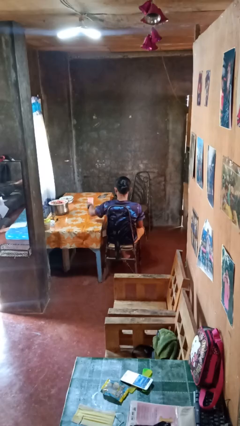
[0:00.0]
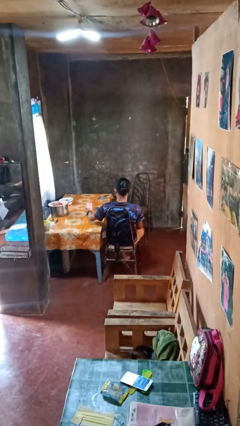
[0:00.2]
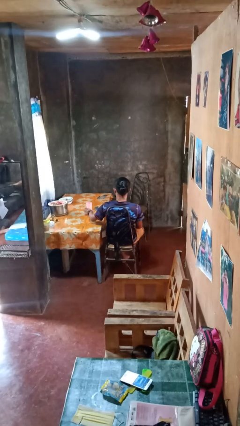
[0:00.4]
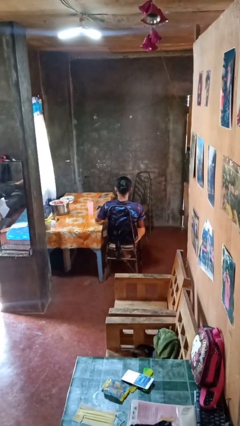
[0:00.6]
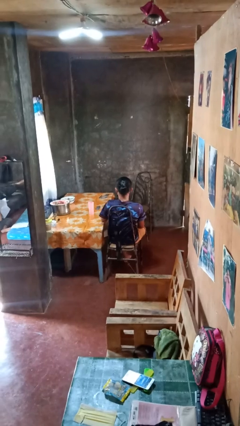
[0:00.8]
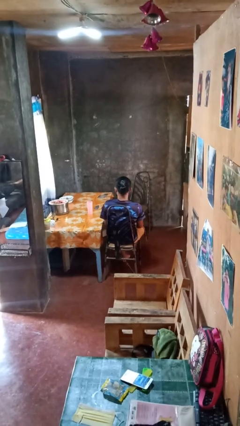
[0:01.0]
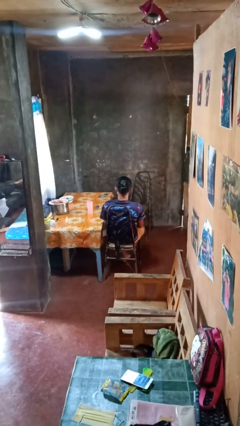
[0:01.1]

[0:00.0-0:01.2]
person sets upright glass

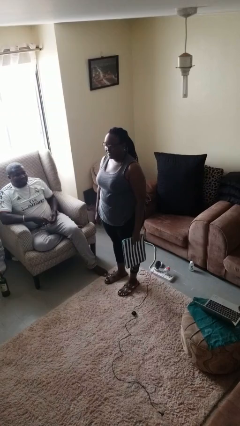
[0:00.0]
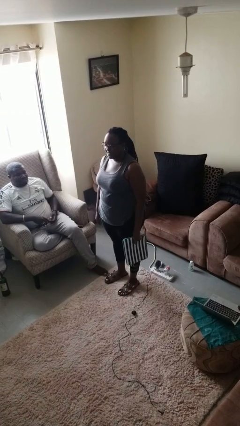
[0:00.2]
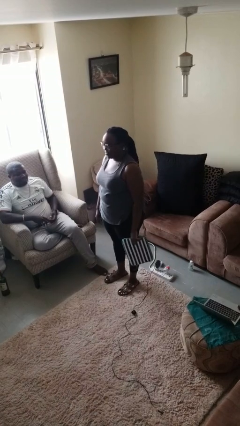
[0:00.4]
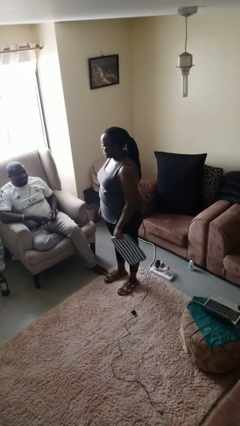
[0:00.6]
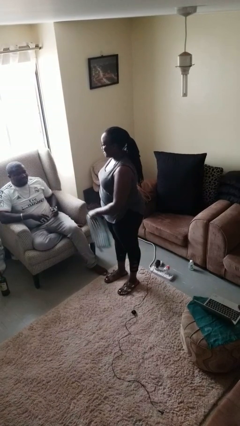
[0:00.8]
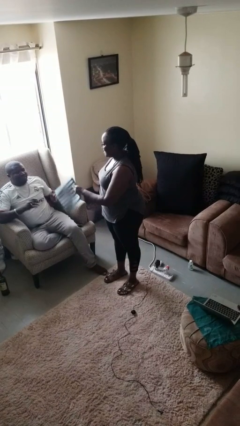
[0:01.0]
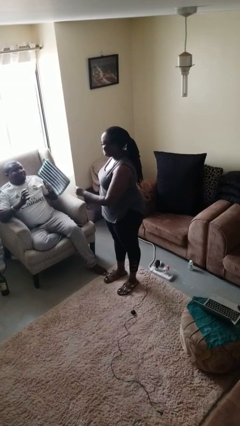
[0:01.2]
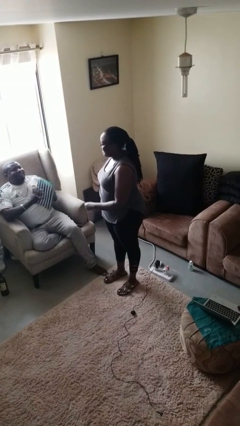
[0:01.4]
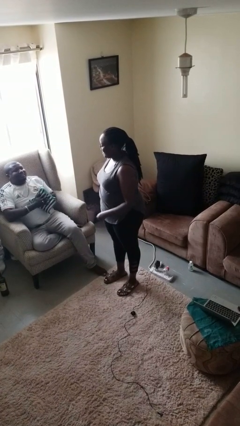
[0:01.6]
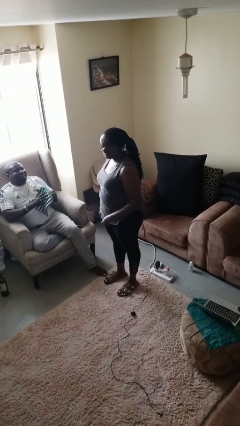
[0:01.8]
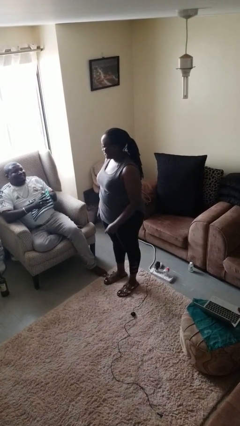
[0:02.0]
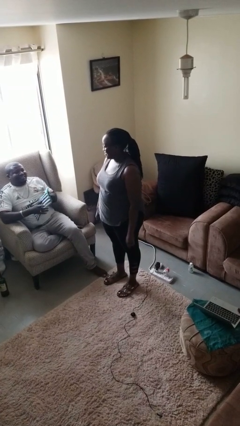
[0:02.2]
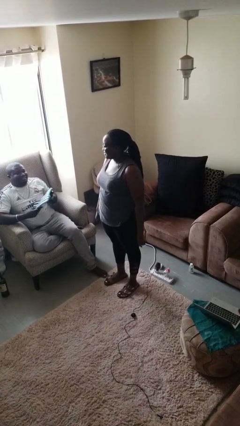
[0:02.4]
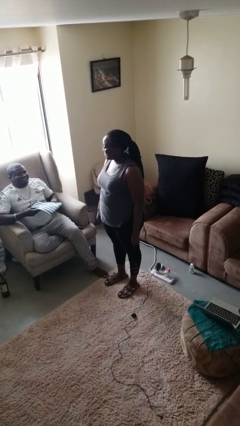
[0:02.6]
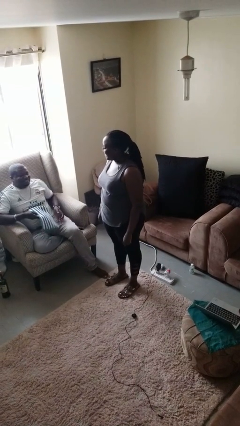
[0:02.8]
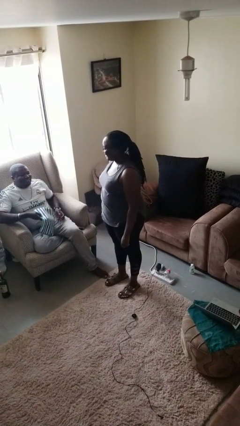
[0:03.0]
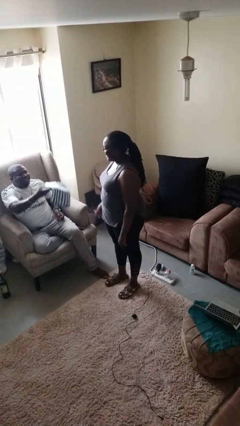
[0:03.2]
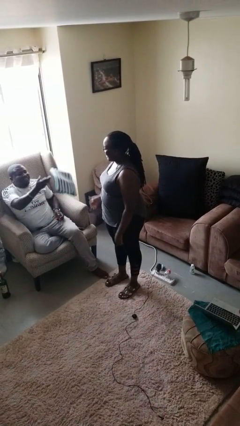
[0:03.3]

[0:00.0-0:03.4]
person throws object to person

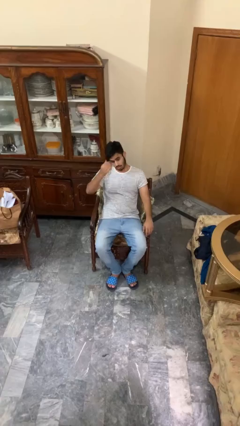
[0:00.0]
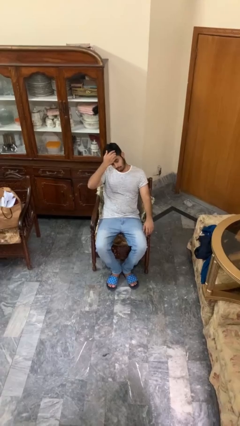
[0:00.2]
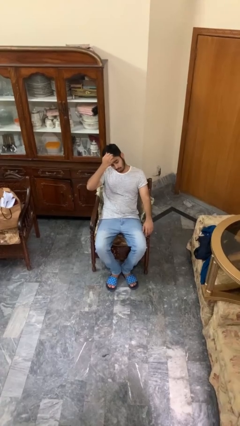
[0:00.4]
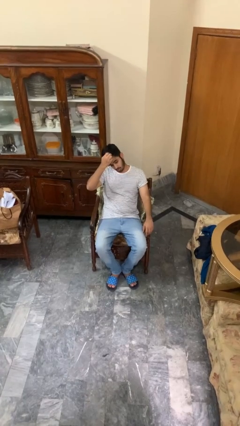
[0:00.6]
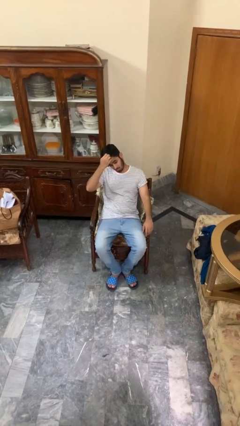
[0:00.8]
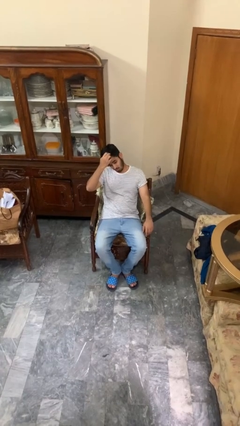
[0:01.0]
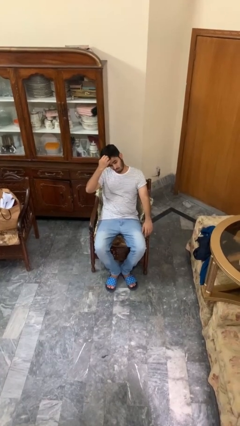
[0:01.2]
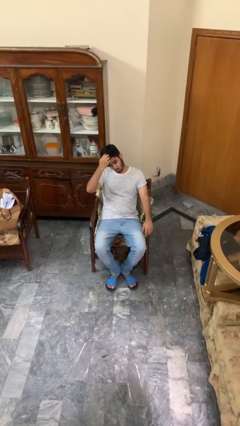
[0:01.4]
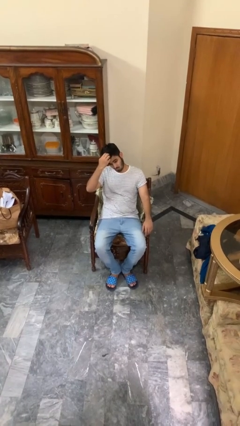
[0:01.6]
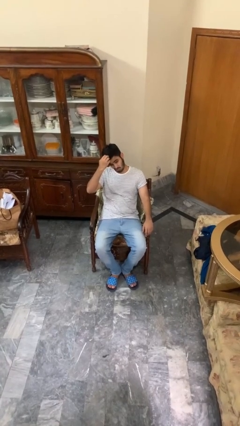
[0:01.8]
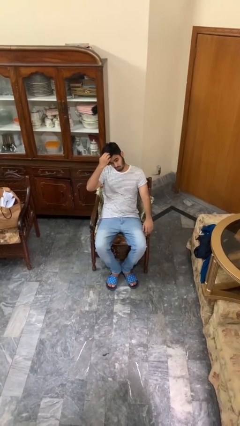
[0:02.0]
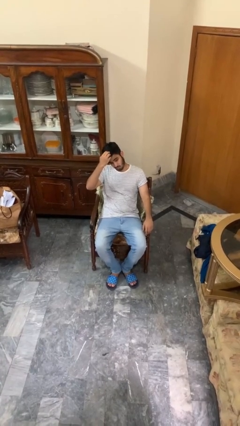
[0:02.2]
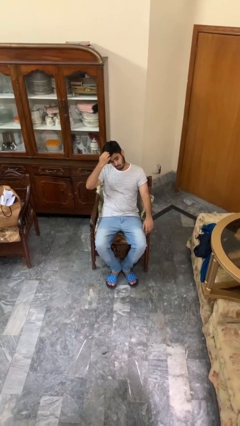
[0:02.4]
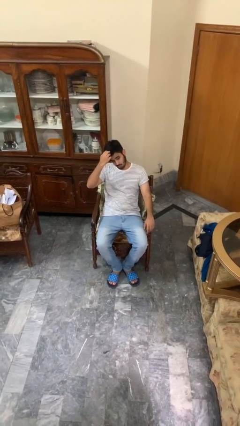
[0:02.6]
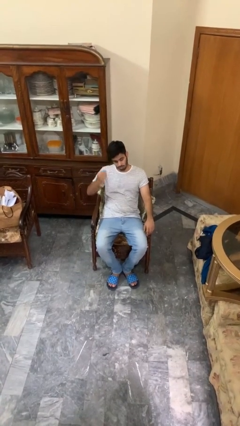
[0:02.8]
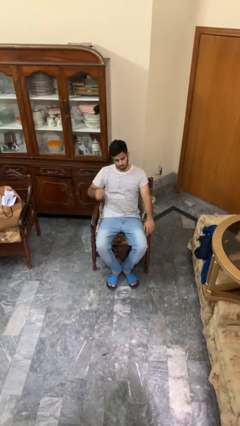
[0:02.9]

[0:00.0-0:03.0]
person strokes hair

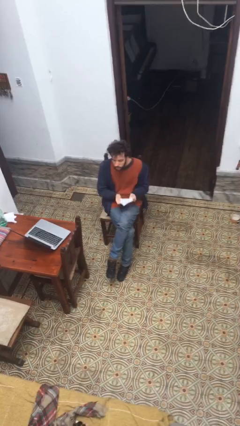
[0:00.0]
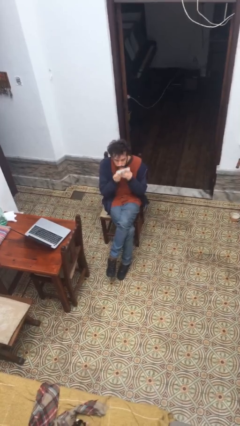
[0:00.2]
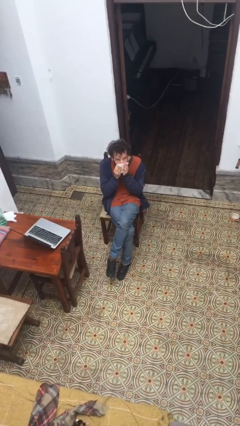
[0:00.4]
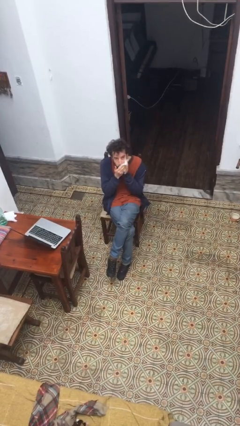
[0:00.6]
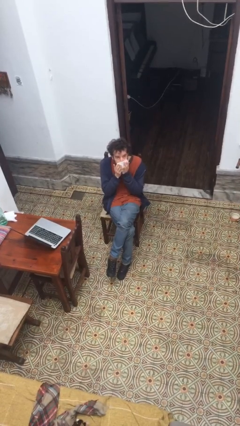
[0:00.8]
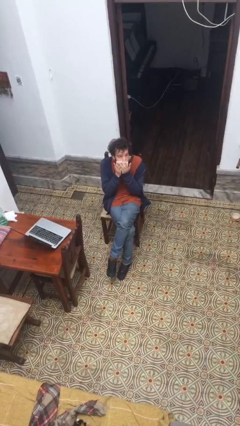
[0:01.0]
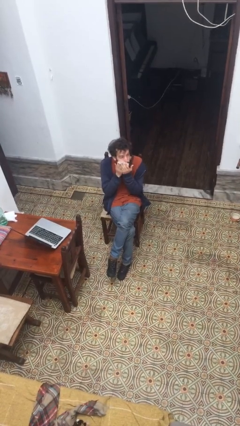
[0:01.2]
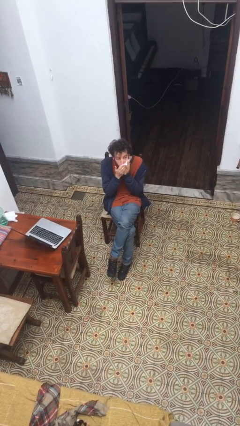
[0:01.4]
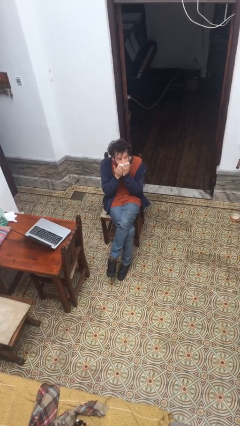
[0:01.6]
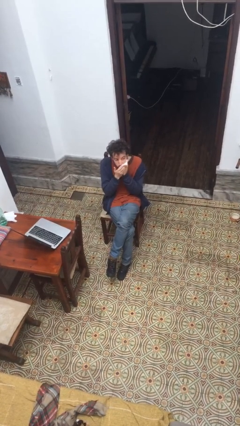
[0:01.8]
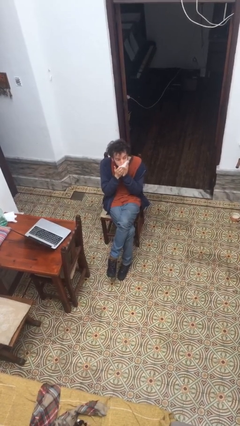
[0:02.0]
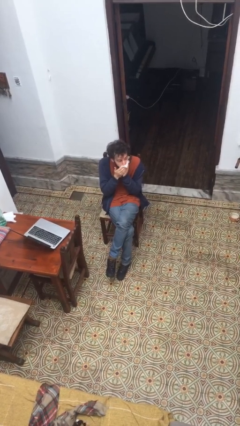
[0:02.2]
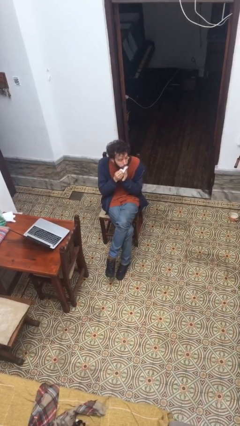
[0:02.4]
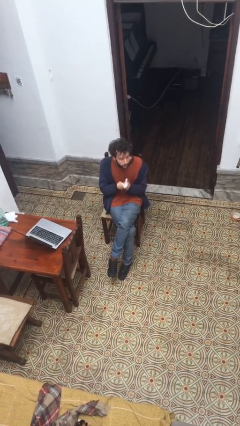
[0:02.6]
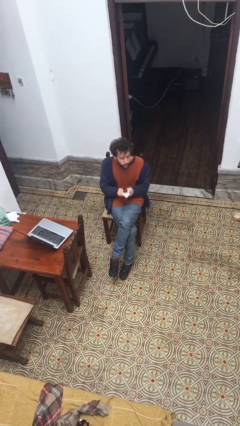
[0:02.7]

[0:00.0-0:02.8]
person wipes mouth with napkin

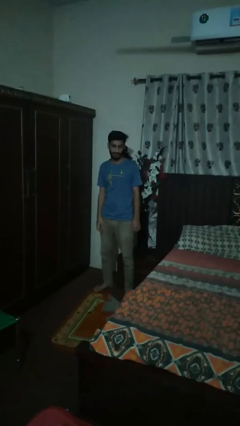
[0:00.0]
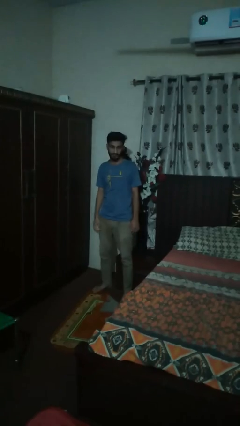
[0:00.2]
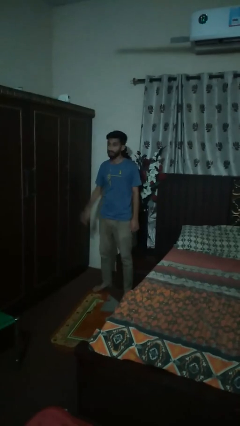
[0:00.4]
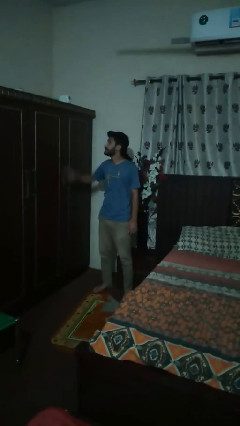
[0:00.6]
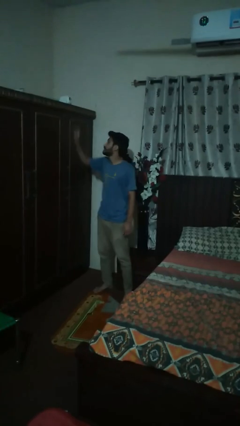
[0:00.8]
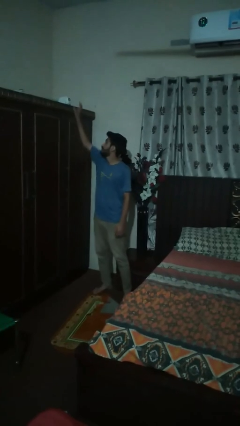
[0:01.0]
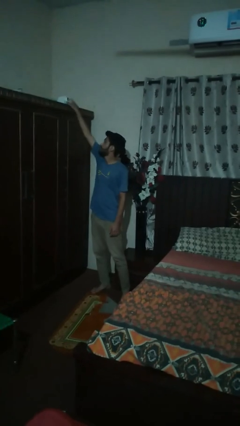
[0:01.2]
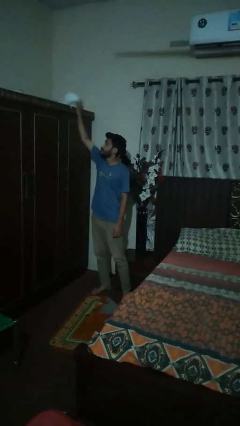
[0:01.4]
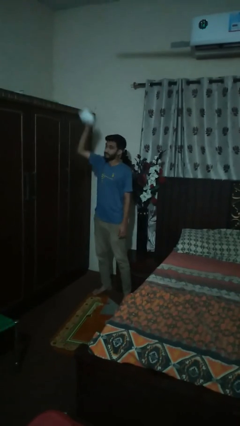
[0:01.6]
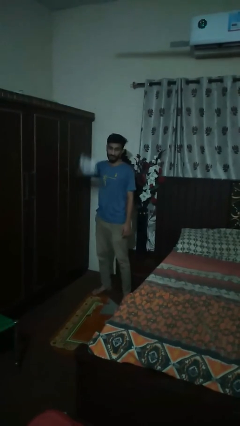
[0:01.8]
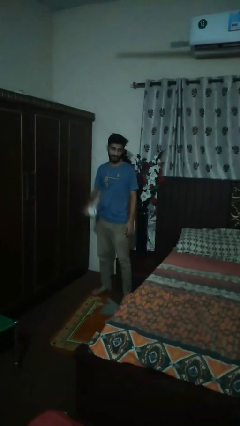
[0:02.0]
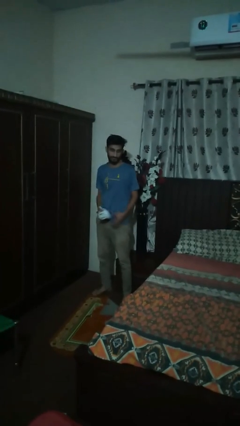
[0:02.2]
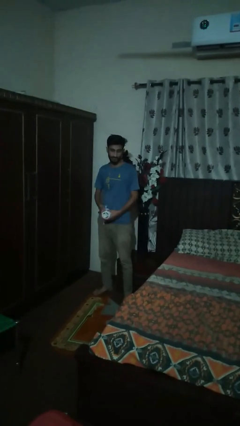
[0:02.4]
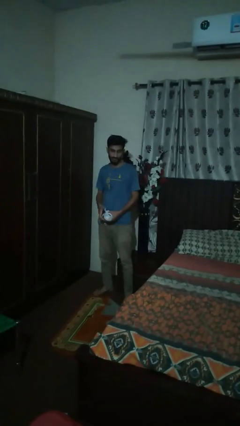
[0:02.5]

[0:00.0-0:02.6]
person puts down object on shelf

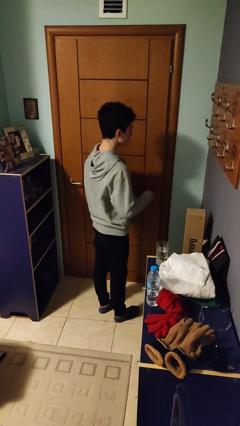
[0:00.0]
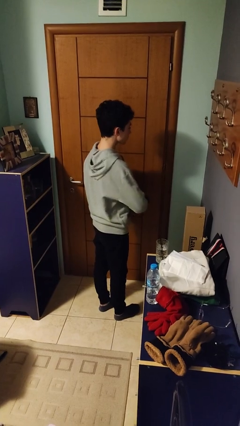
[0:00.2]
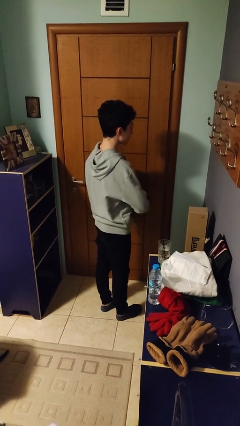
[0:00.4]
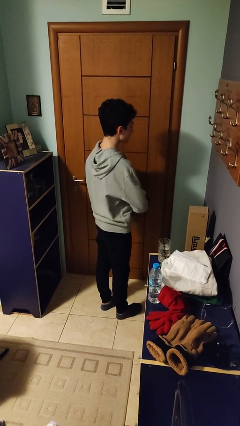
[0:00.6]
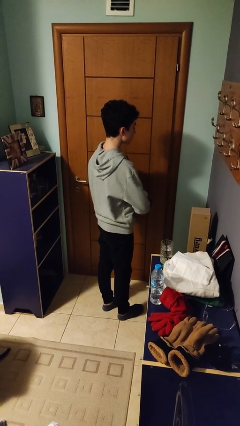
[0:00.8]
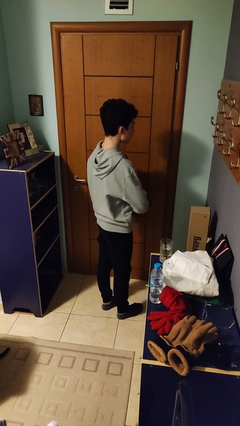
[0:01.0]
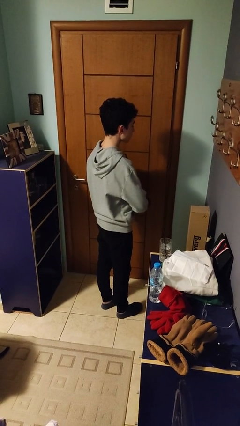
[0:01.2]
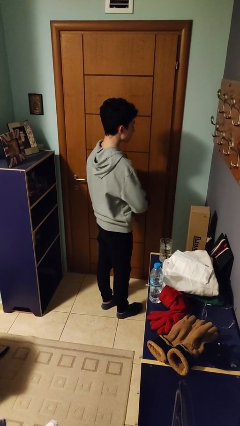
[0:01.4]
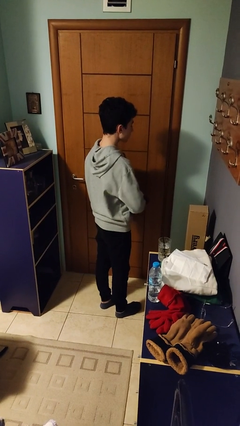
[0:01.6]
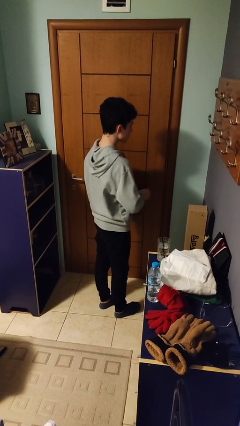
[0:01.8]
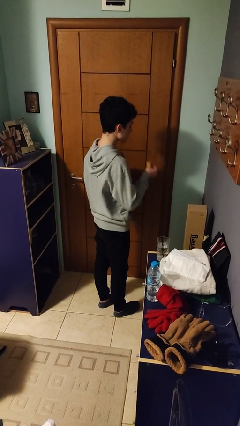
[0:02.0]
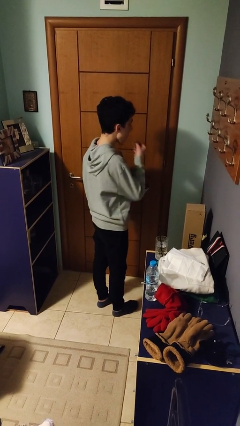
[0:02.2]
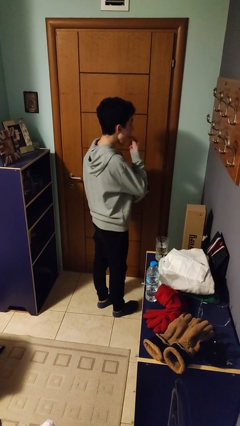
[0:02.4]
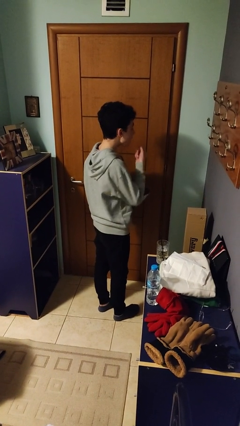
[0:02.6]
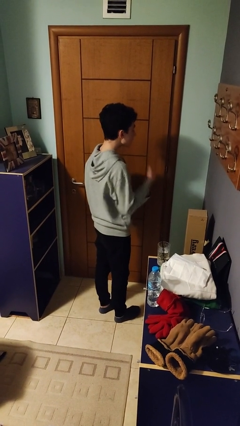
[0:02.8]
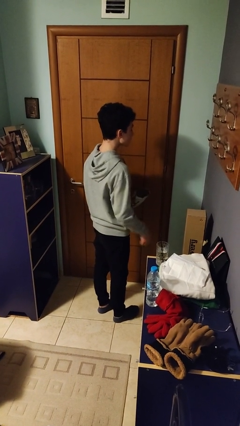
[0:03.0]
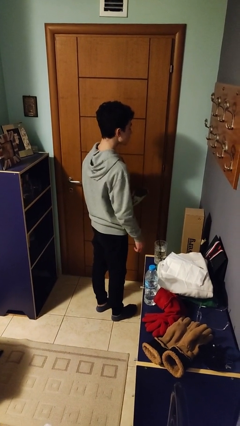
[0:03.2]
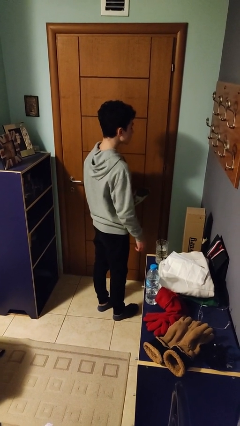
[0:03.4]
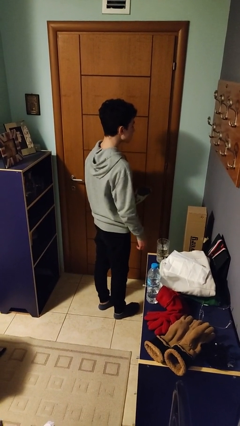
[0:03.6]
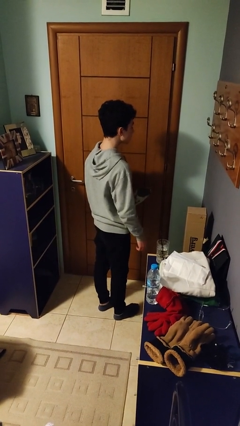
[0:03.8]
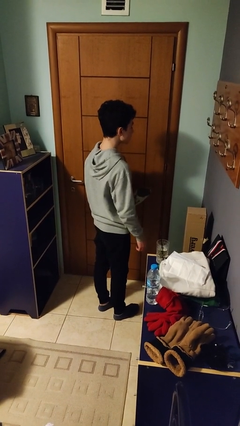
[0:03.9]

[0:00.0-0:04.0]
person eats snack from bag
